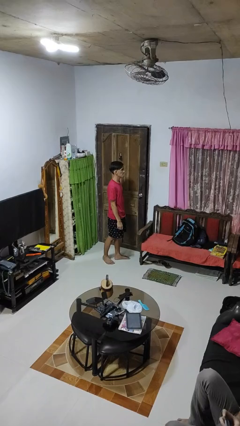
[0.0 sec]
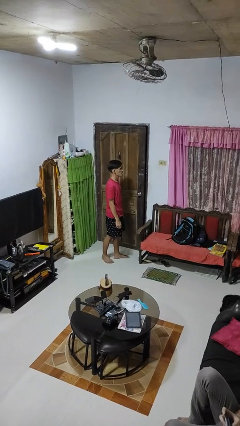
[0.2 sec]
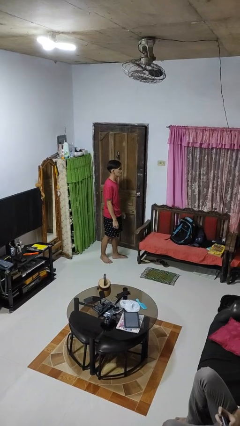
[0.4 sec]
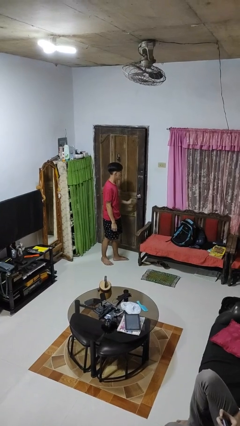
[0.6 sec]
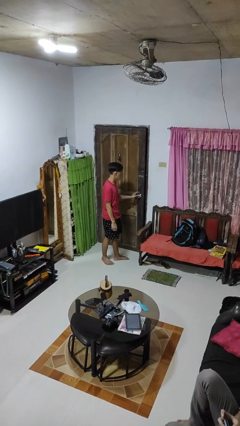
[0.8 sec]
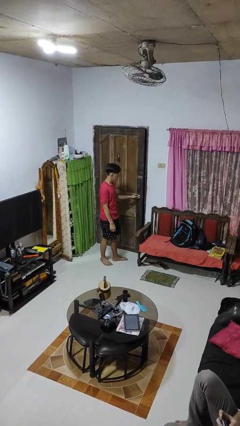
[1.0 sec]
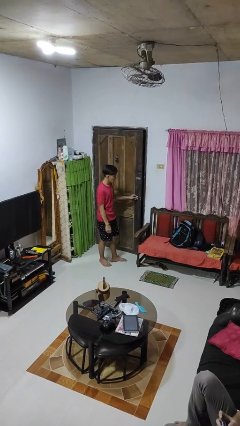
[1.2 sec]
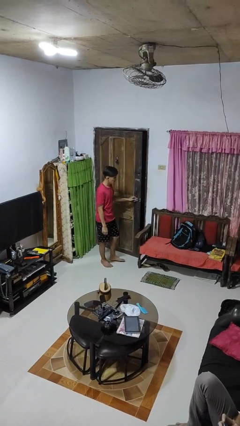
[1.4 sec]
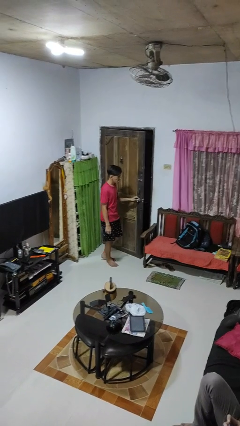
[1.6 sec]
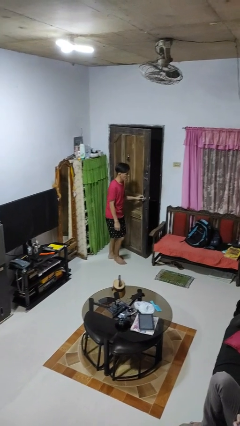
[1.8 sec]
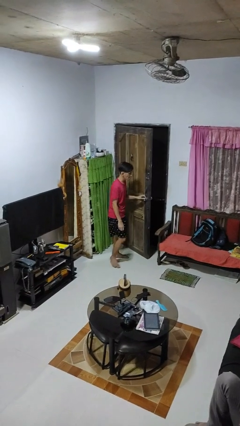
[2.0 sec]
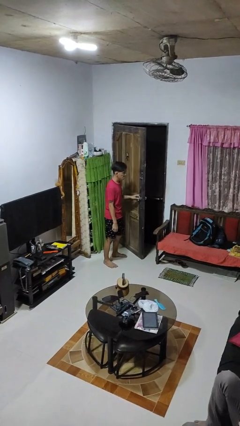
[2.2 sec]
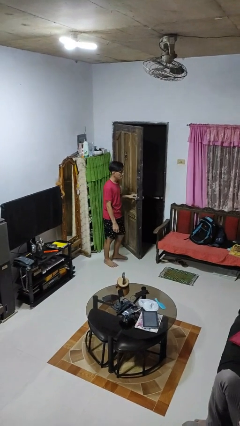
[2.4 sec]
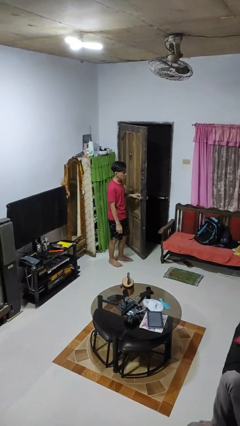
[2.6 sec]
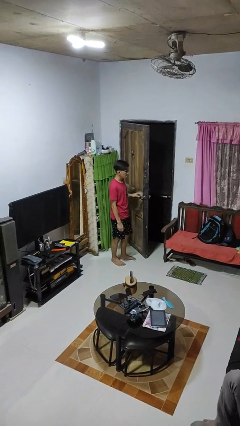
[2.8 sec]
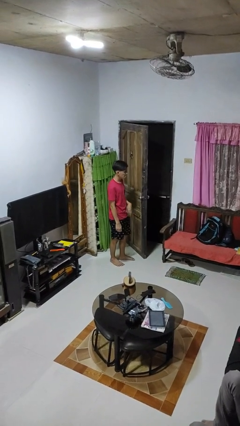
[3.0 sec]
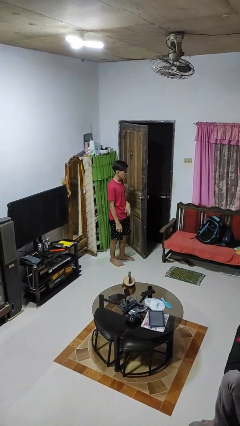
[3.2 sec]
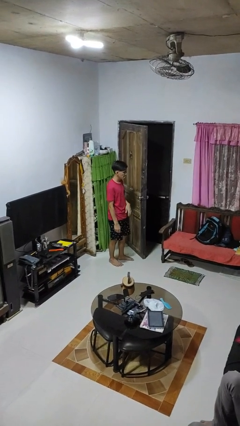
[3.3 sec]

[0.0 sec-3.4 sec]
person opens facility door

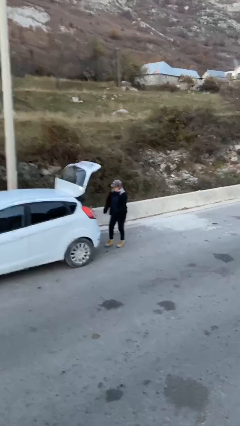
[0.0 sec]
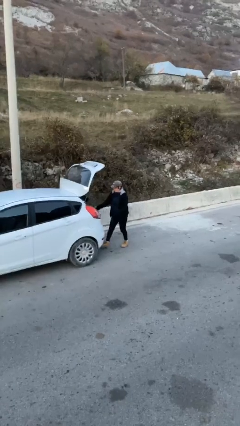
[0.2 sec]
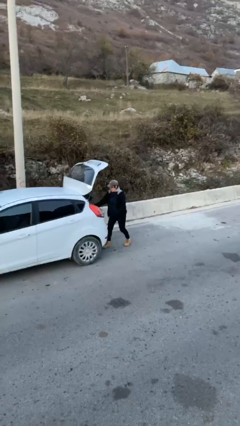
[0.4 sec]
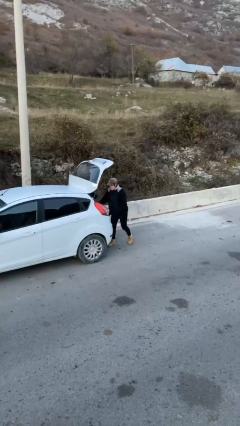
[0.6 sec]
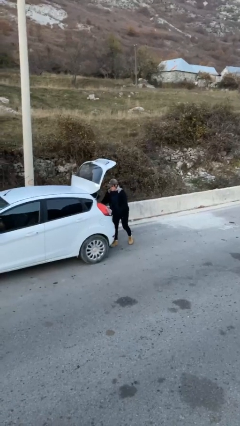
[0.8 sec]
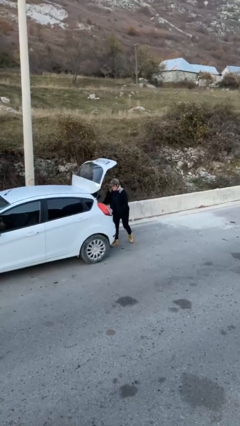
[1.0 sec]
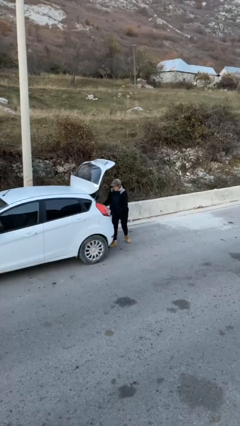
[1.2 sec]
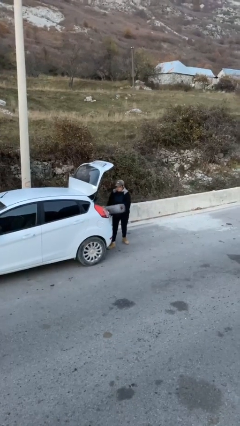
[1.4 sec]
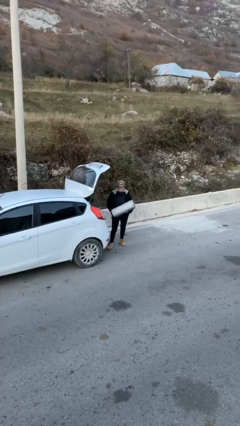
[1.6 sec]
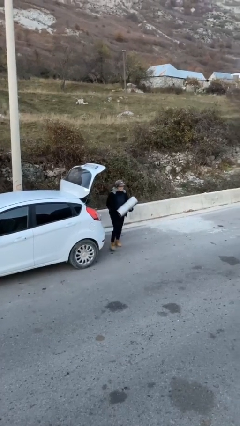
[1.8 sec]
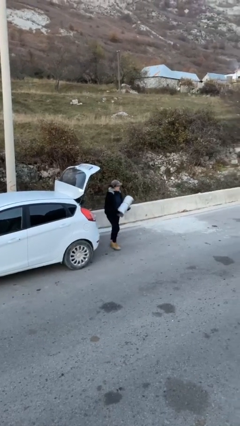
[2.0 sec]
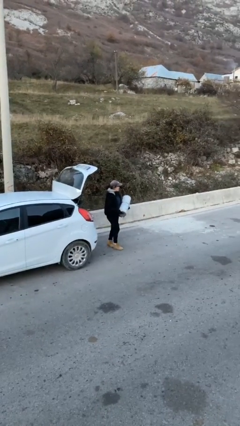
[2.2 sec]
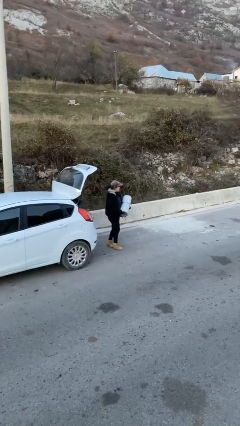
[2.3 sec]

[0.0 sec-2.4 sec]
person unloads car

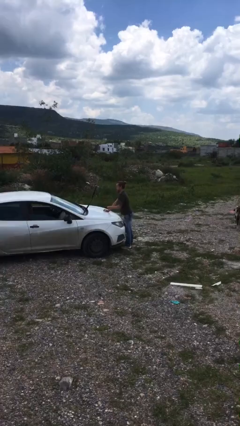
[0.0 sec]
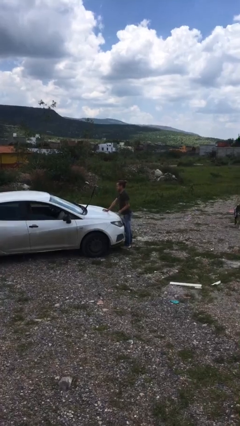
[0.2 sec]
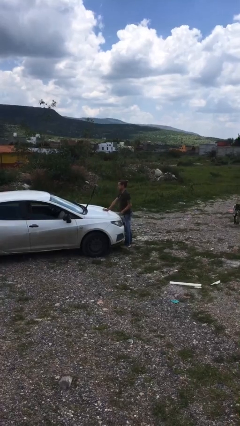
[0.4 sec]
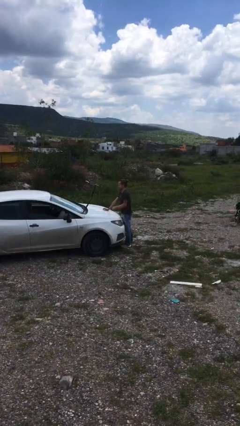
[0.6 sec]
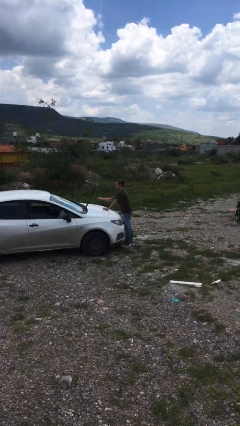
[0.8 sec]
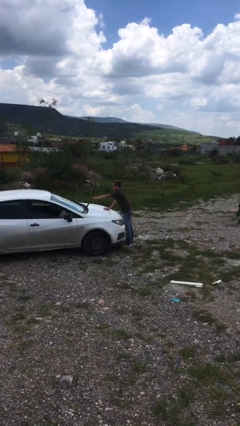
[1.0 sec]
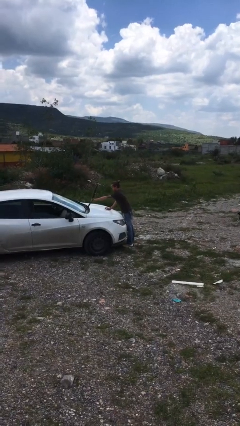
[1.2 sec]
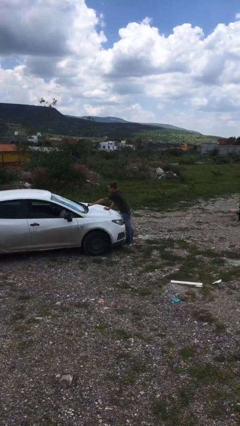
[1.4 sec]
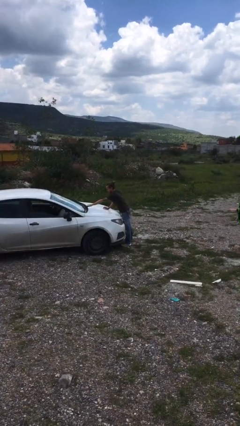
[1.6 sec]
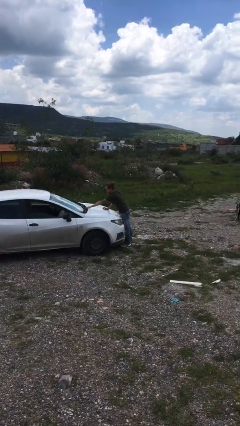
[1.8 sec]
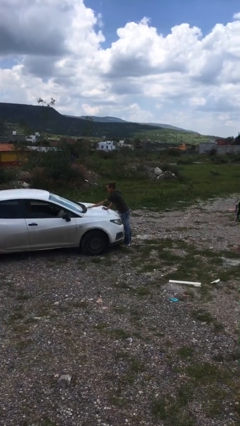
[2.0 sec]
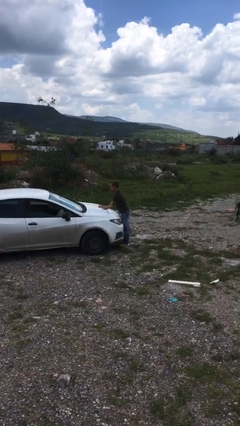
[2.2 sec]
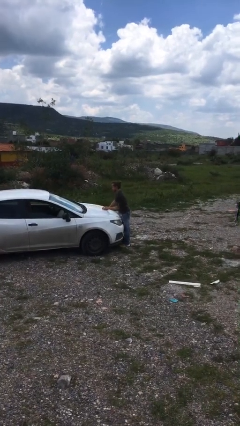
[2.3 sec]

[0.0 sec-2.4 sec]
person flips down car wipers

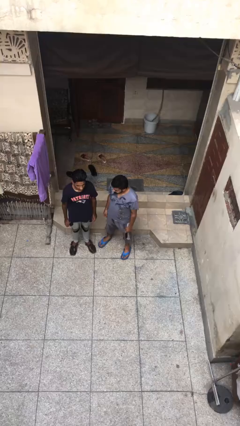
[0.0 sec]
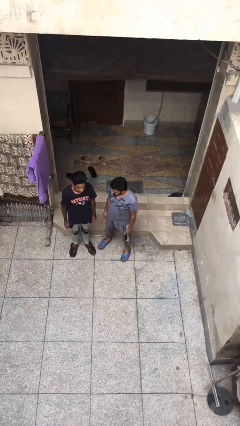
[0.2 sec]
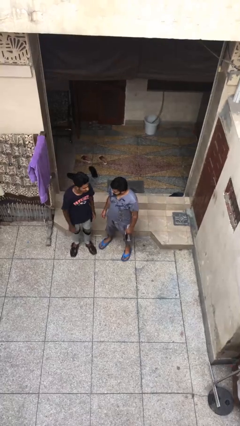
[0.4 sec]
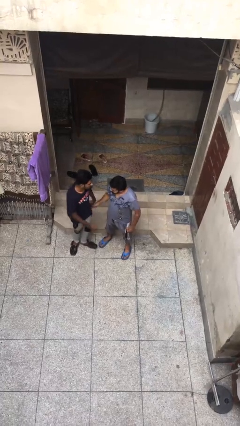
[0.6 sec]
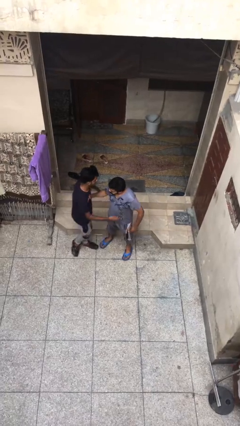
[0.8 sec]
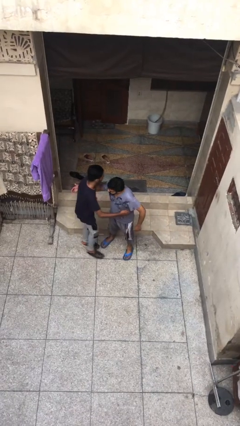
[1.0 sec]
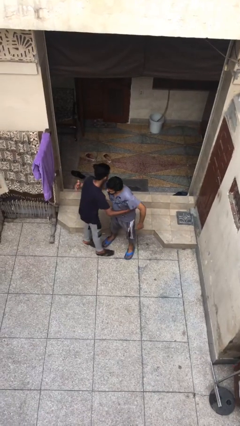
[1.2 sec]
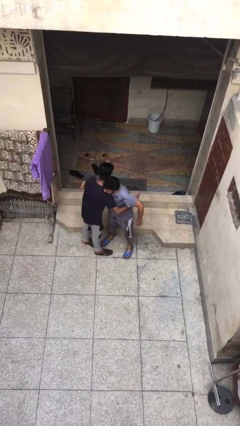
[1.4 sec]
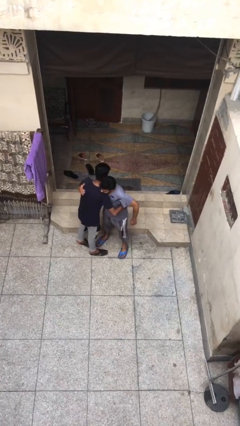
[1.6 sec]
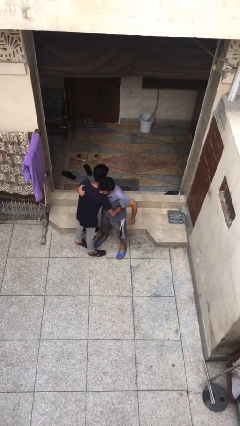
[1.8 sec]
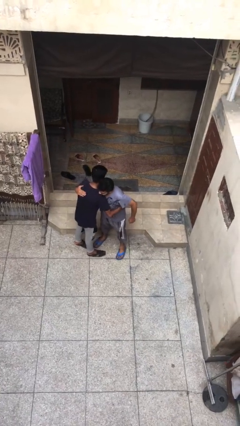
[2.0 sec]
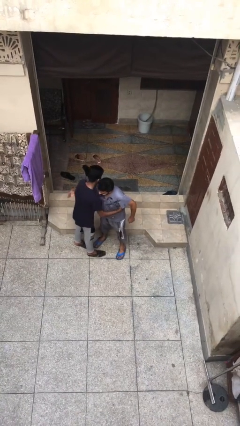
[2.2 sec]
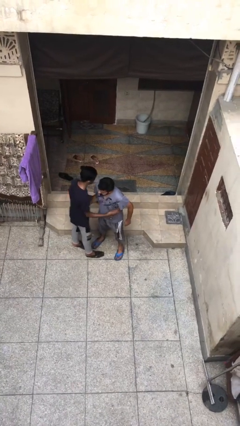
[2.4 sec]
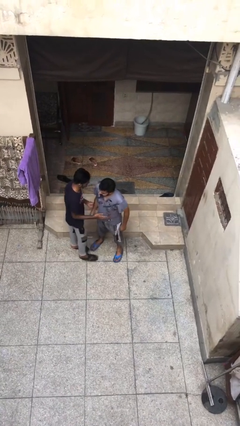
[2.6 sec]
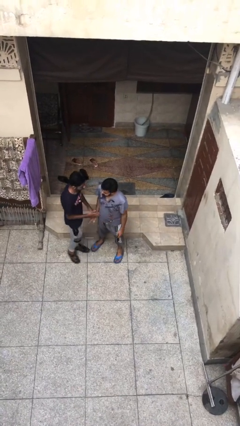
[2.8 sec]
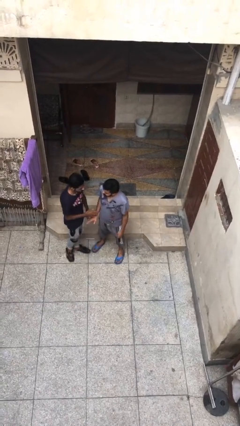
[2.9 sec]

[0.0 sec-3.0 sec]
person embraces person

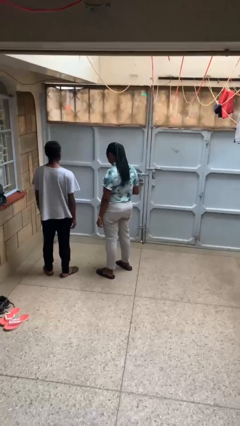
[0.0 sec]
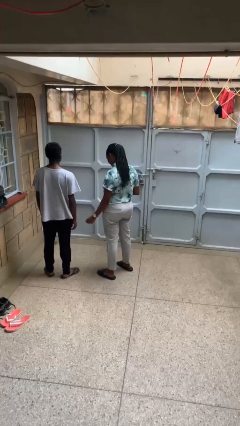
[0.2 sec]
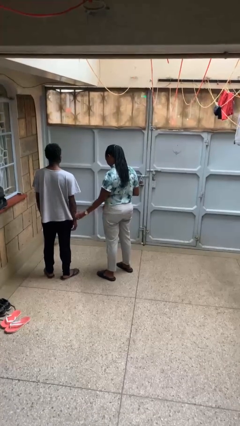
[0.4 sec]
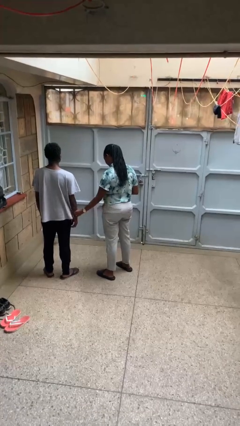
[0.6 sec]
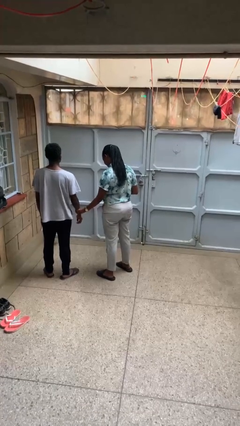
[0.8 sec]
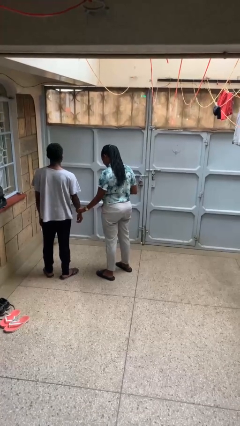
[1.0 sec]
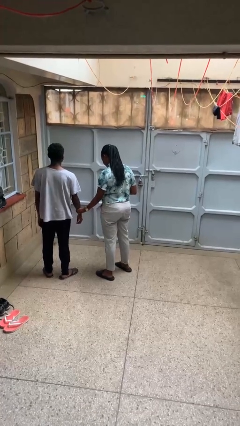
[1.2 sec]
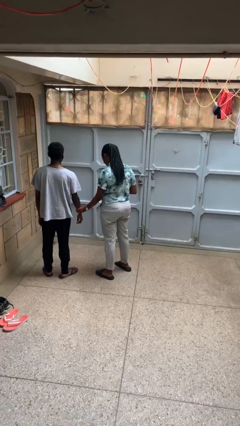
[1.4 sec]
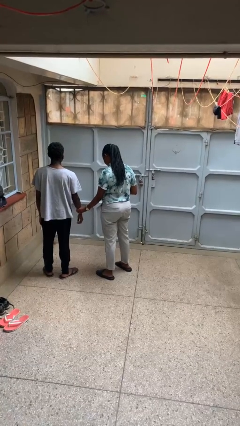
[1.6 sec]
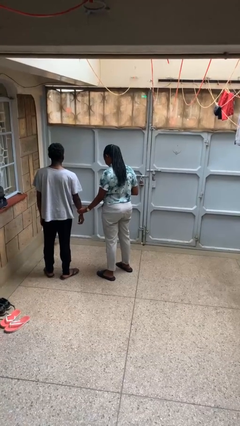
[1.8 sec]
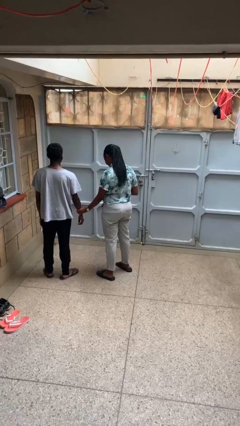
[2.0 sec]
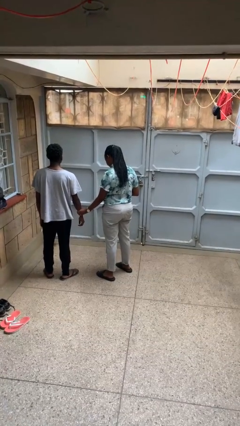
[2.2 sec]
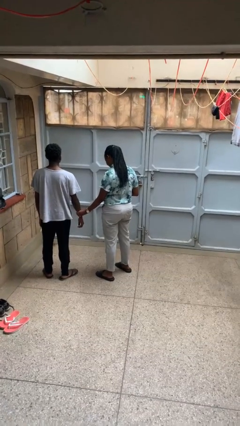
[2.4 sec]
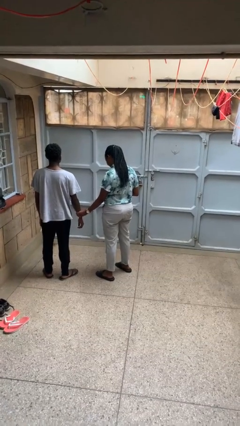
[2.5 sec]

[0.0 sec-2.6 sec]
person grabs person by forearm

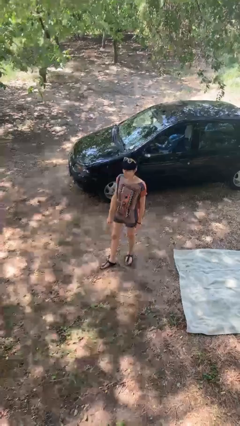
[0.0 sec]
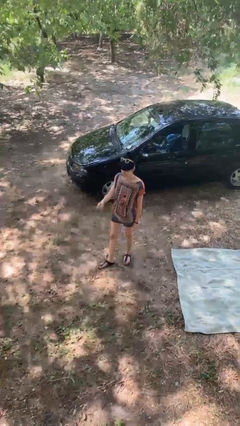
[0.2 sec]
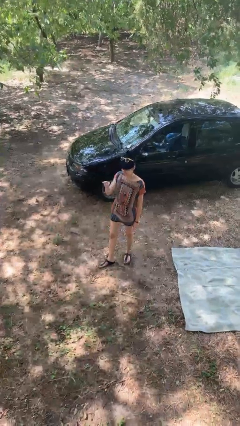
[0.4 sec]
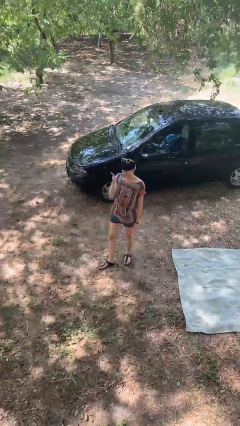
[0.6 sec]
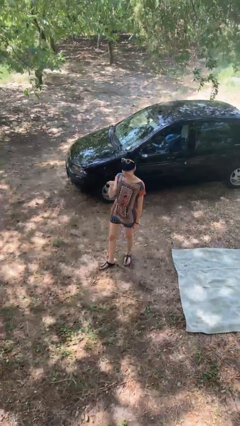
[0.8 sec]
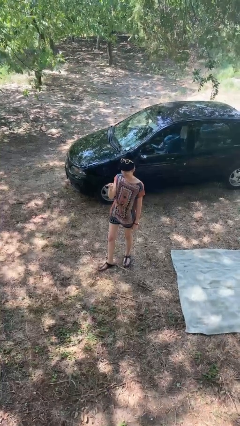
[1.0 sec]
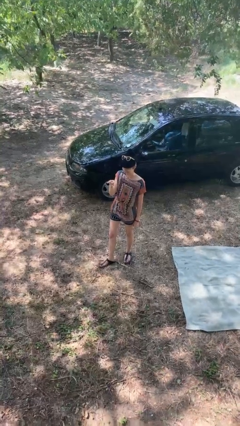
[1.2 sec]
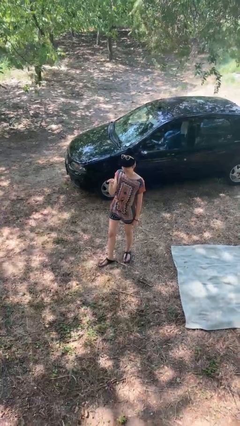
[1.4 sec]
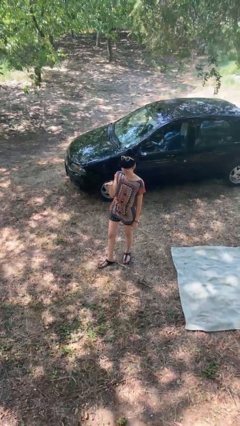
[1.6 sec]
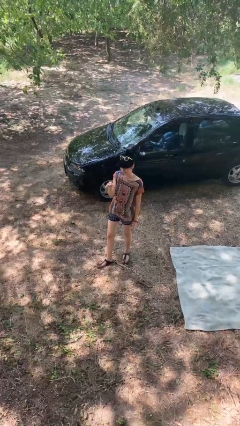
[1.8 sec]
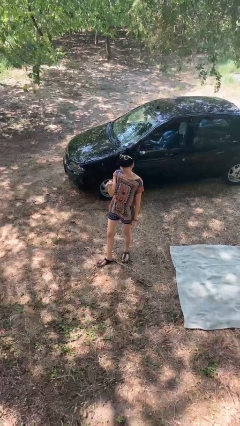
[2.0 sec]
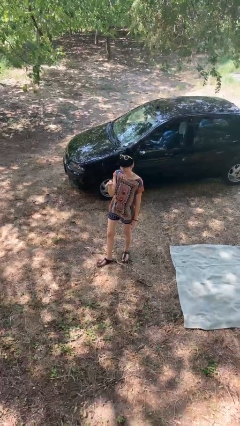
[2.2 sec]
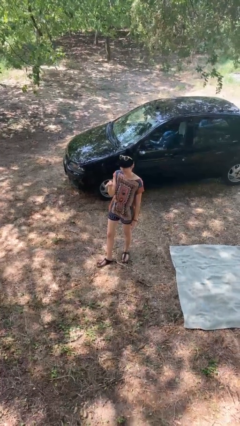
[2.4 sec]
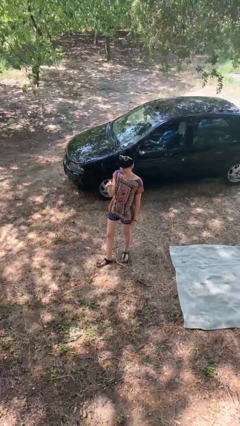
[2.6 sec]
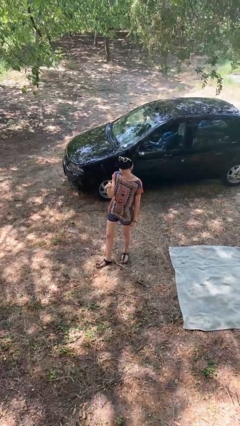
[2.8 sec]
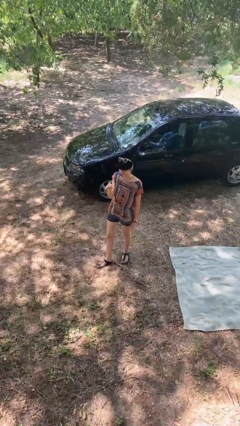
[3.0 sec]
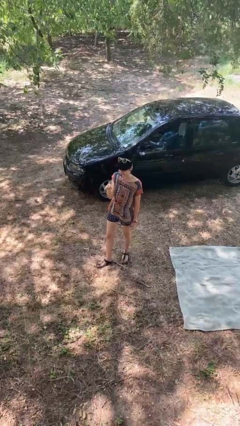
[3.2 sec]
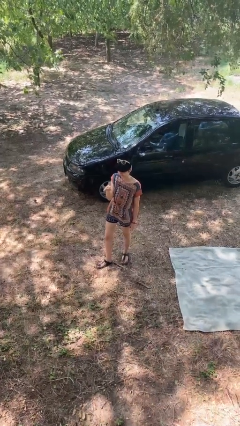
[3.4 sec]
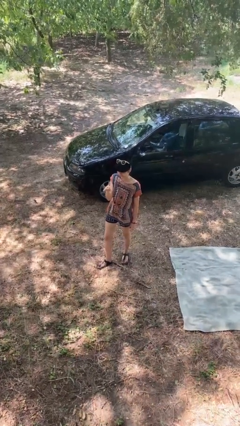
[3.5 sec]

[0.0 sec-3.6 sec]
person points at person
